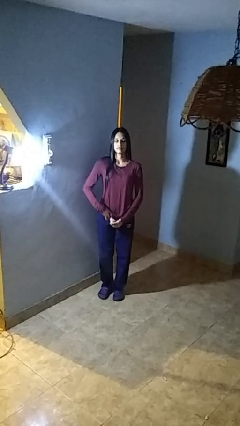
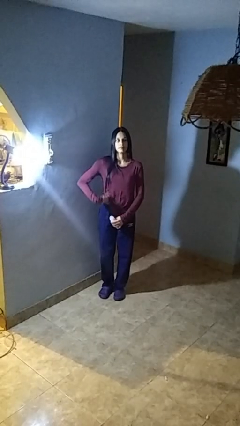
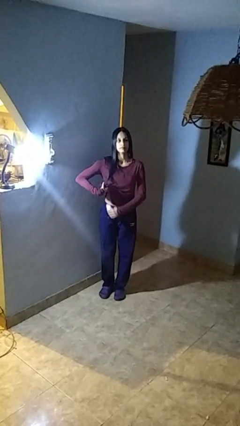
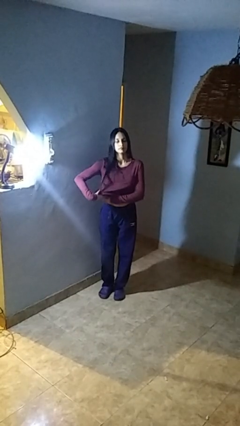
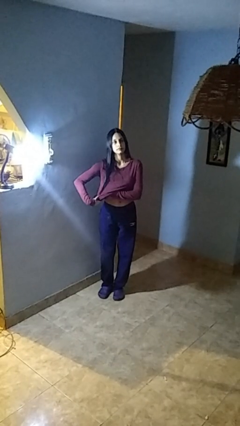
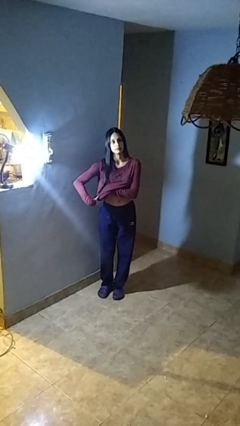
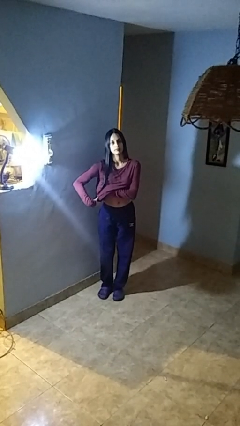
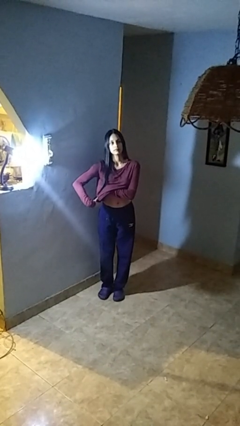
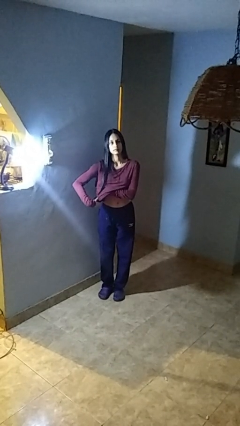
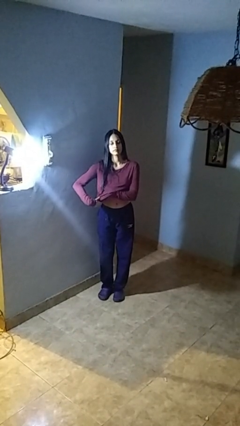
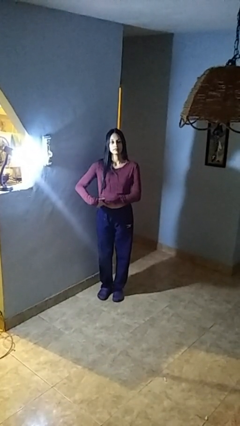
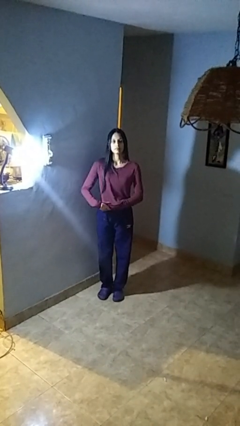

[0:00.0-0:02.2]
person applies deodorant

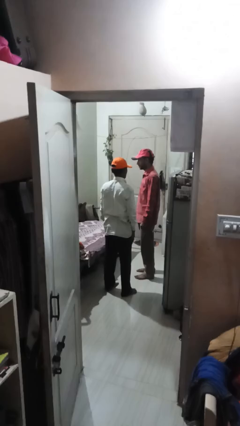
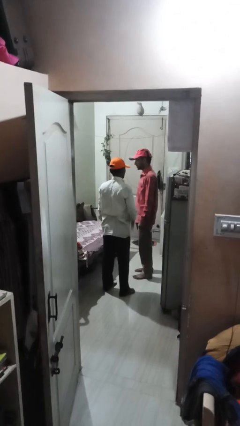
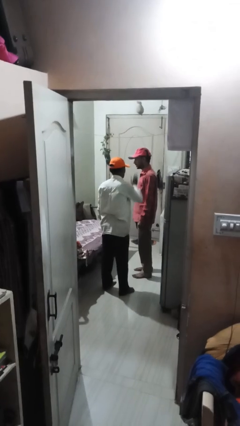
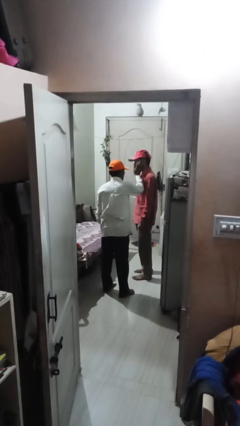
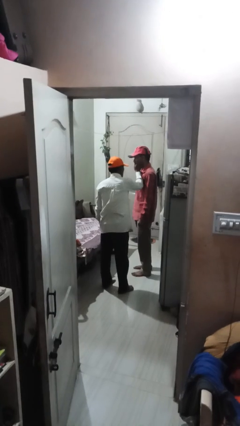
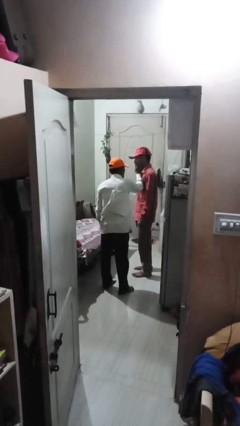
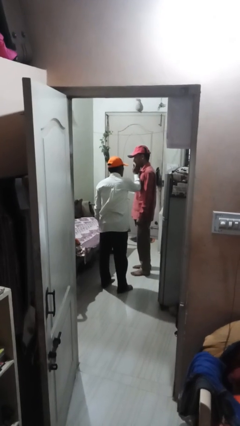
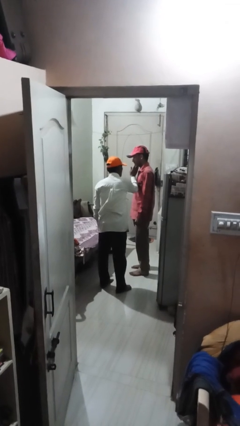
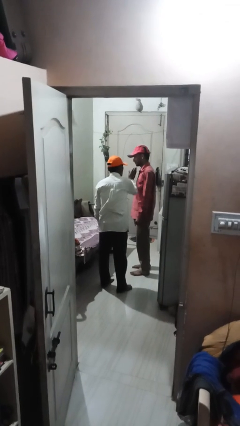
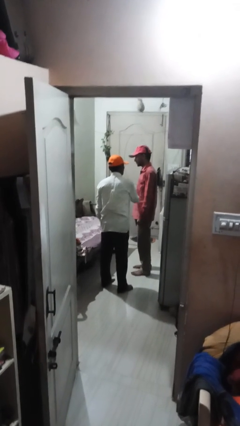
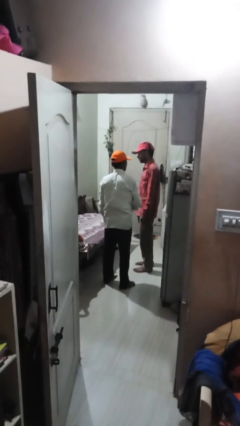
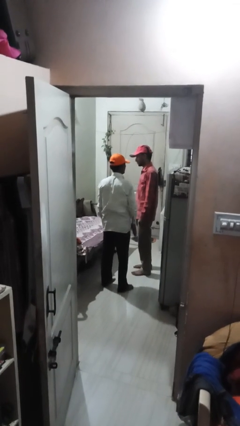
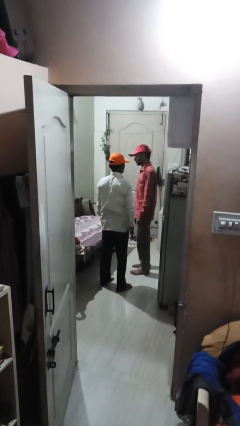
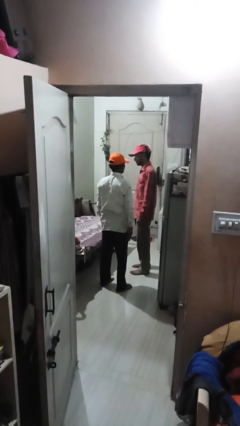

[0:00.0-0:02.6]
person touches face of person

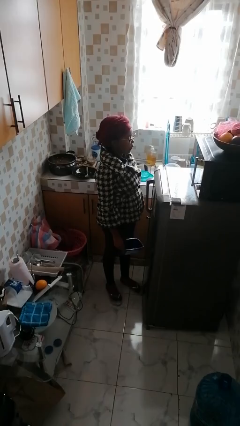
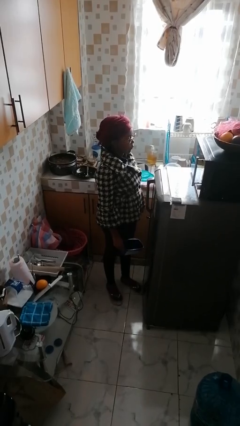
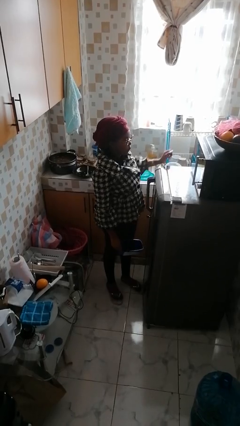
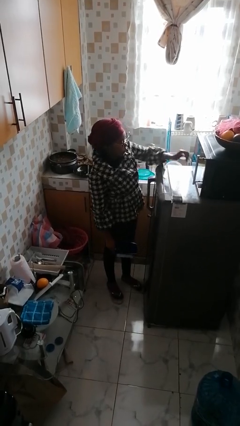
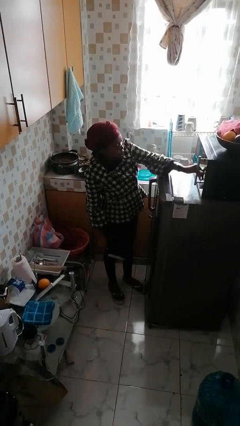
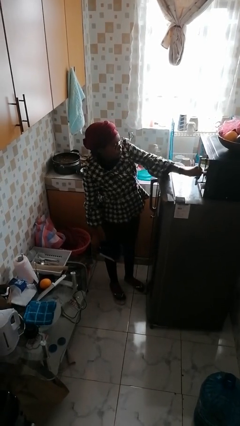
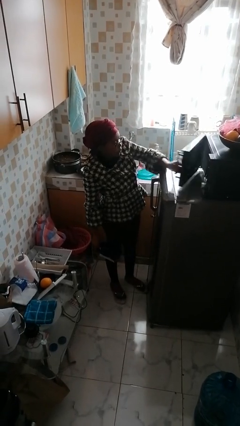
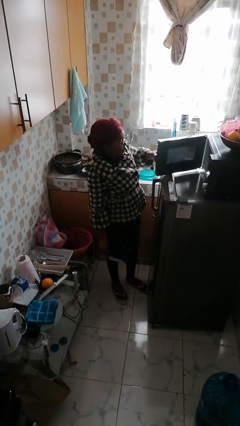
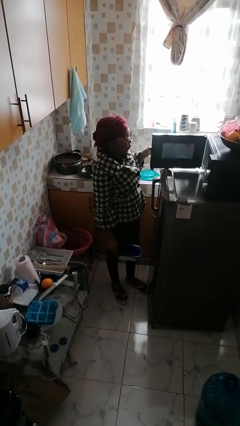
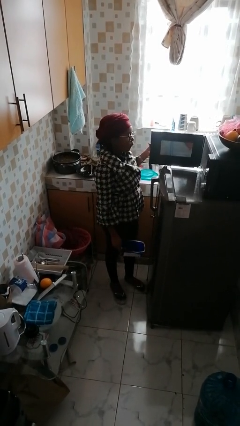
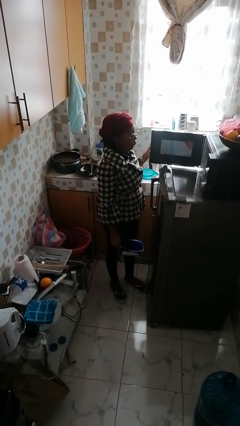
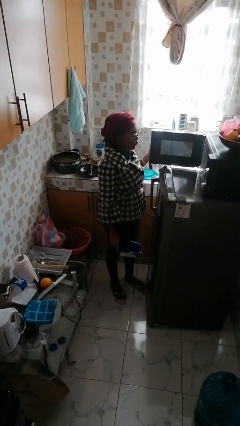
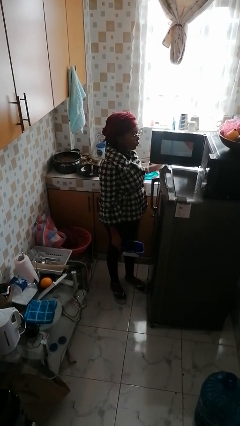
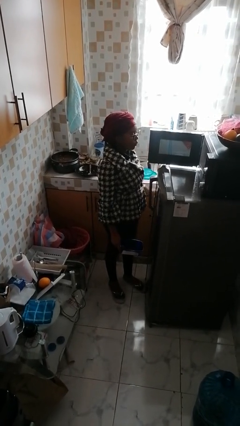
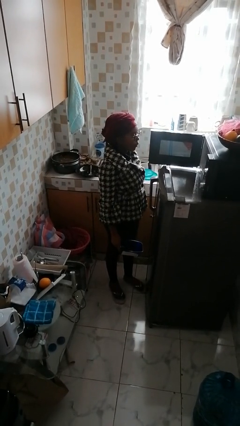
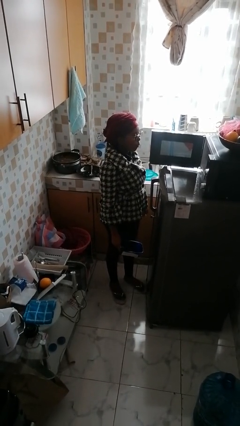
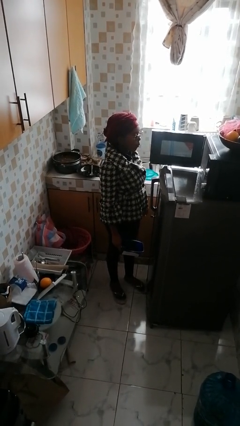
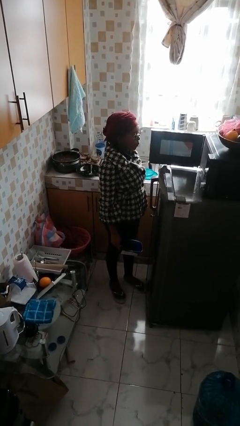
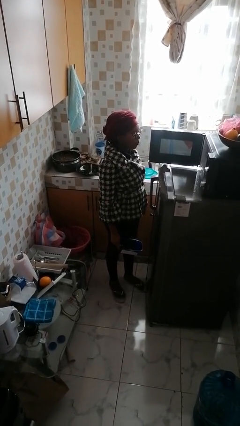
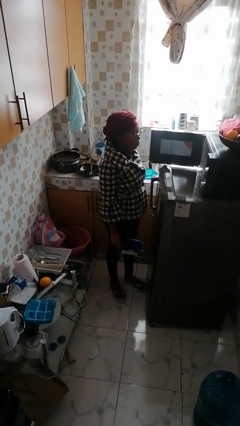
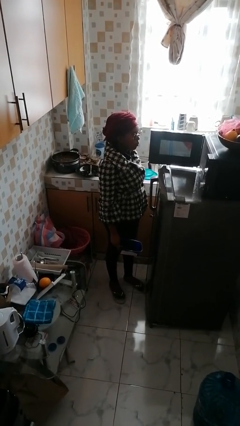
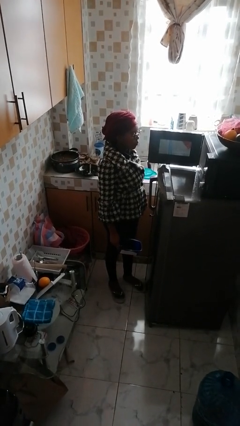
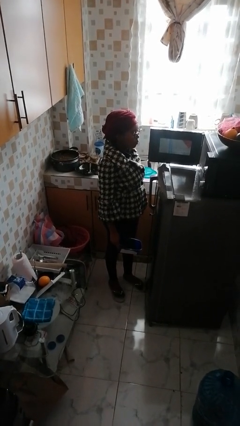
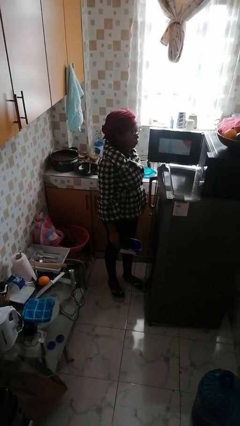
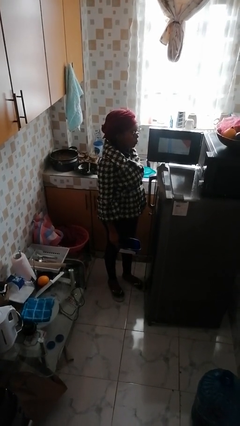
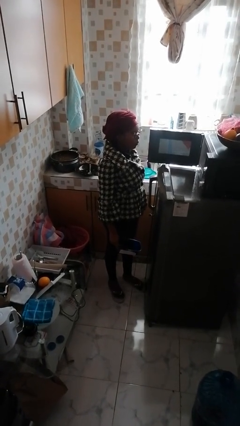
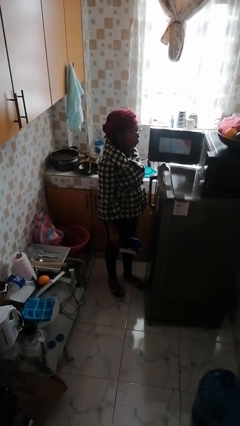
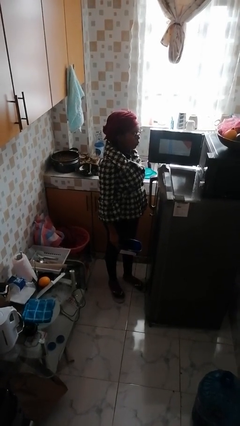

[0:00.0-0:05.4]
person opens microwave

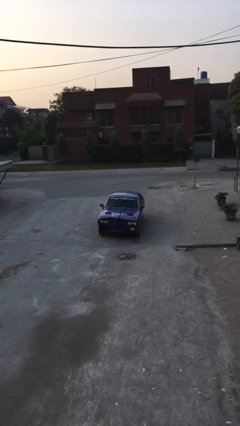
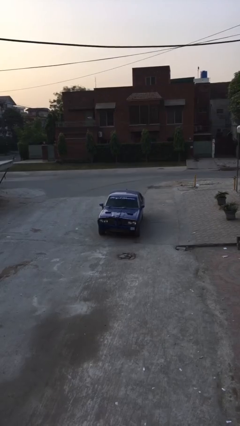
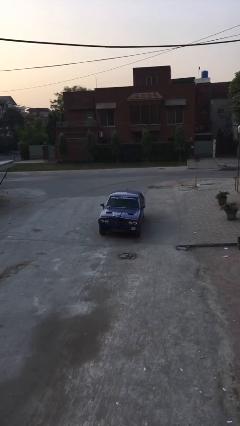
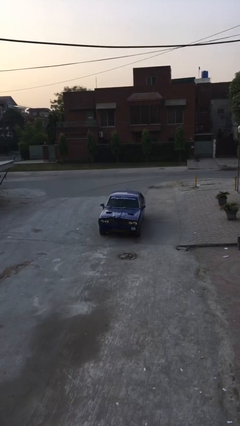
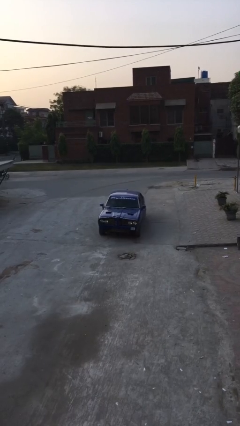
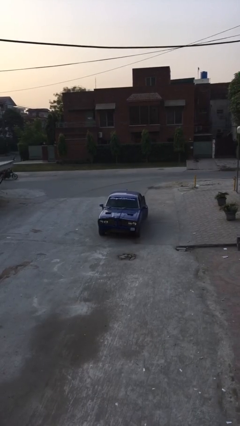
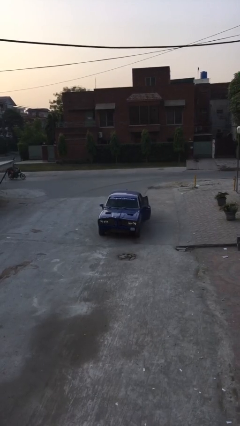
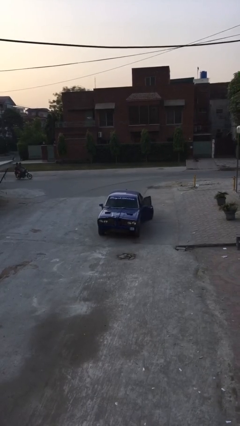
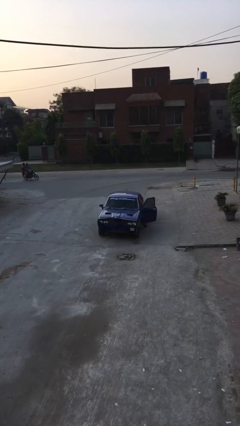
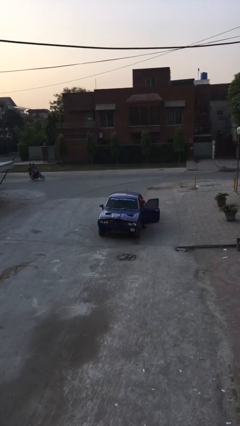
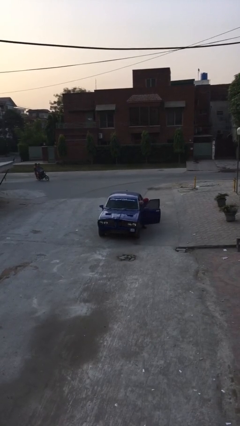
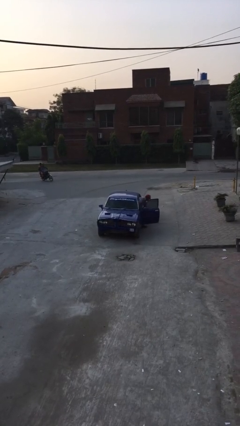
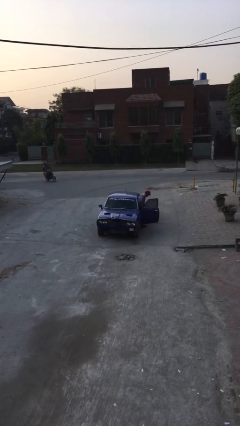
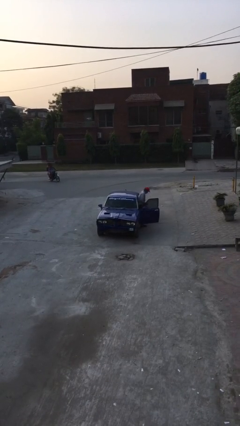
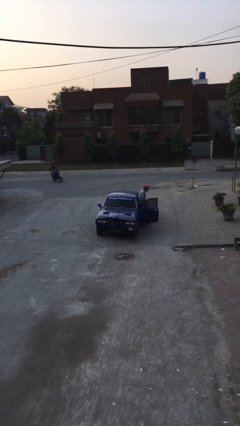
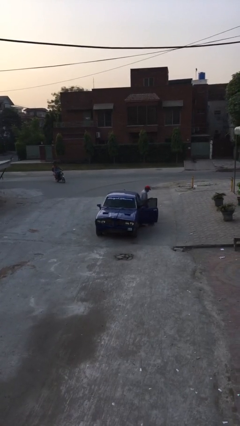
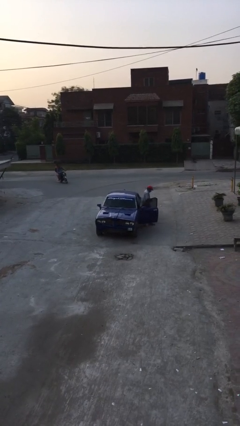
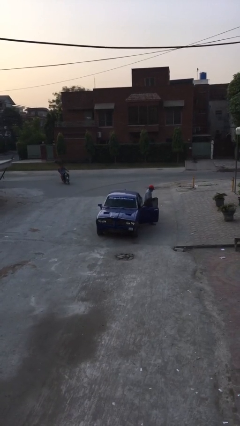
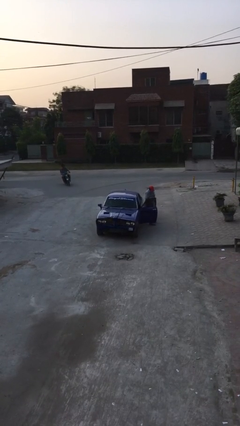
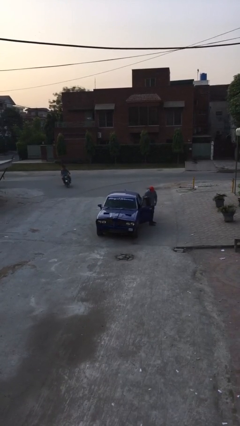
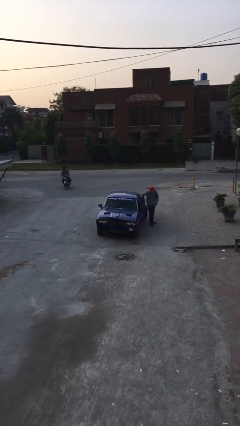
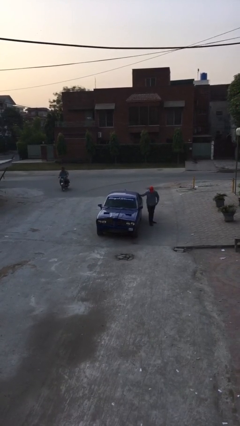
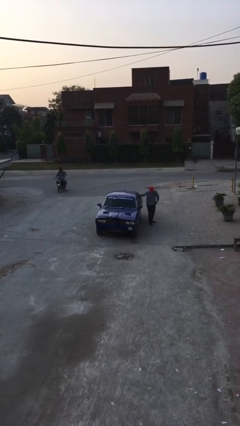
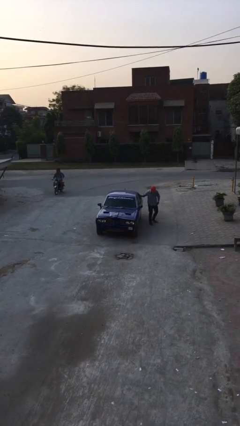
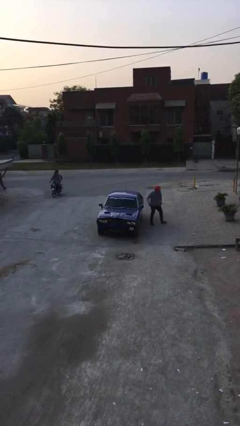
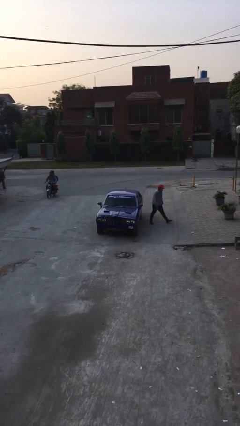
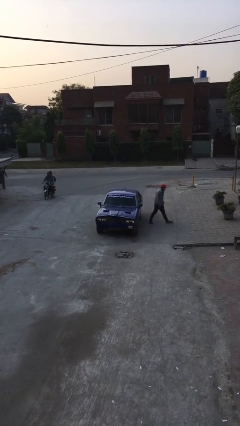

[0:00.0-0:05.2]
car drops off person

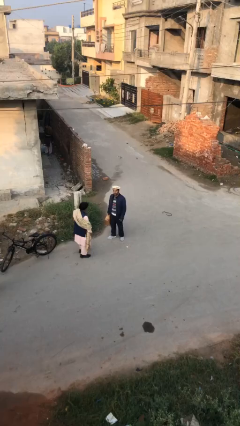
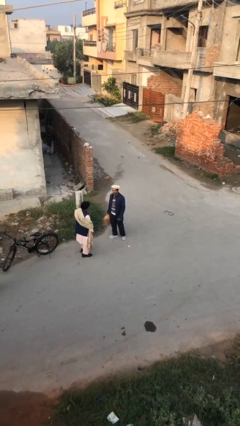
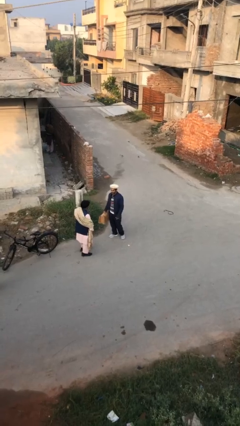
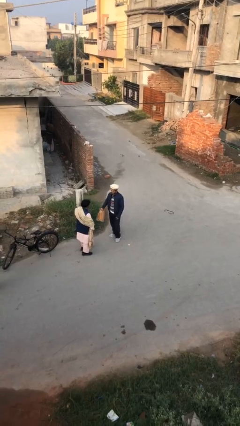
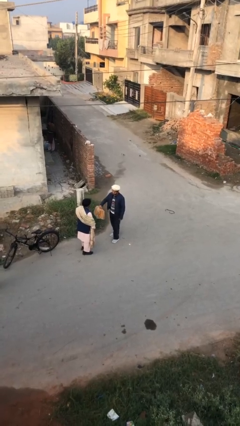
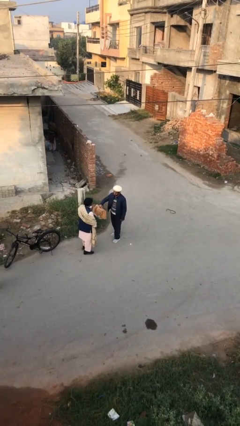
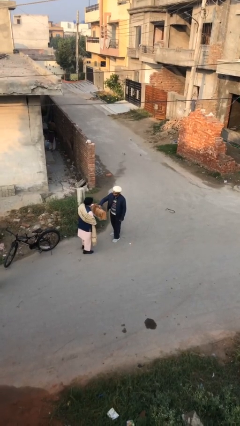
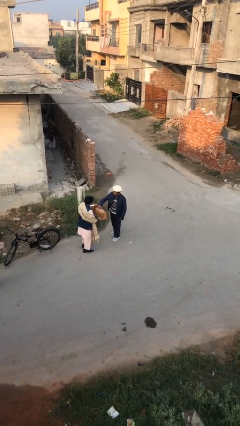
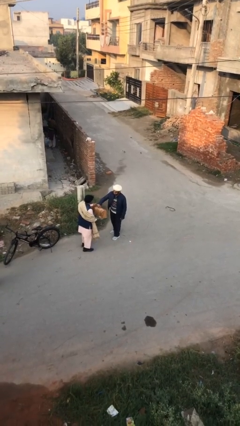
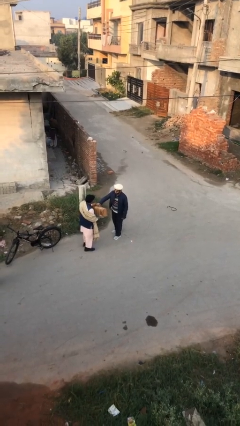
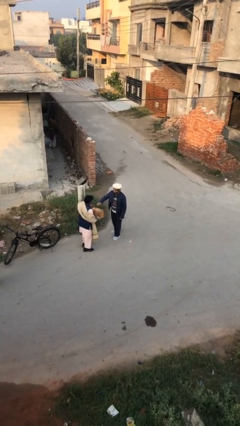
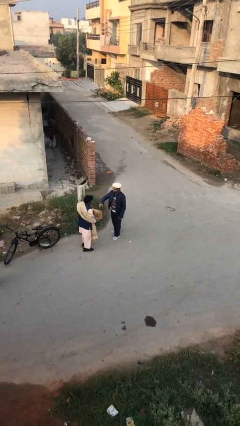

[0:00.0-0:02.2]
person transfers object to person

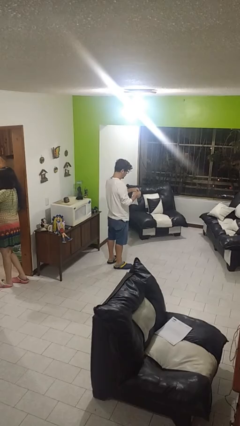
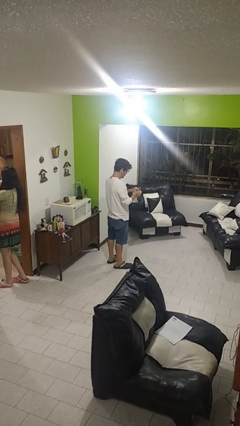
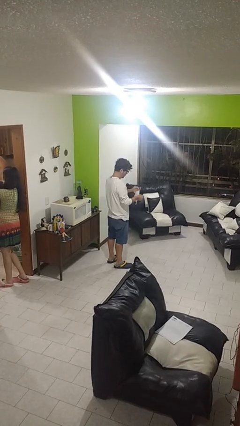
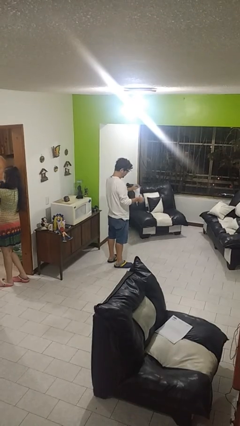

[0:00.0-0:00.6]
person tears paper
